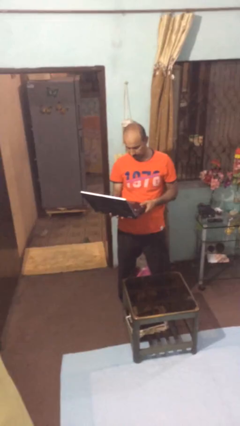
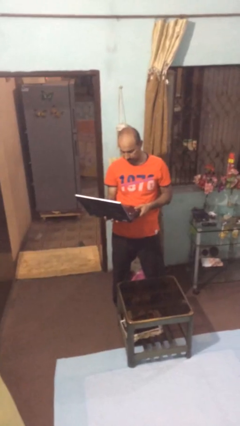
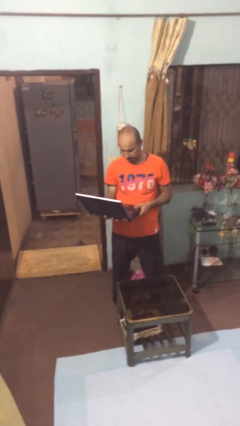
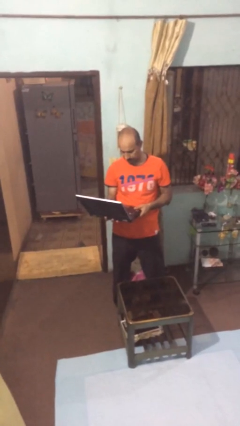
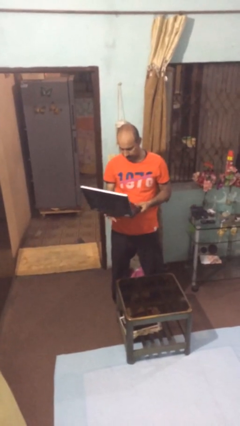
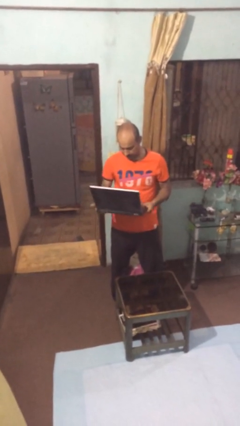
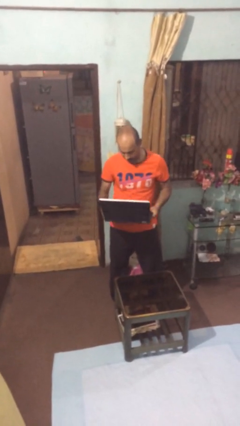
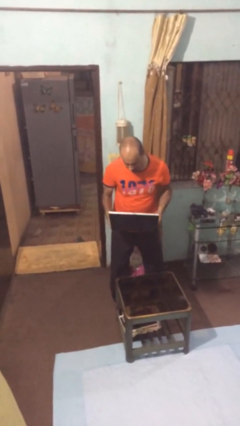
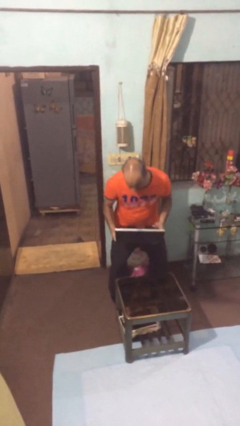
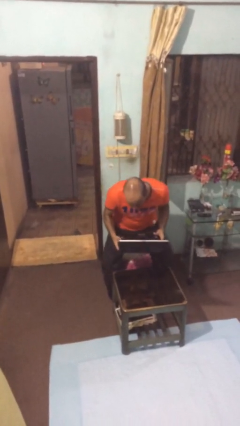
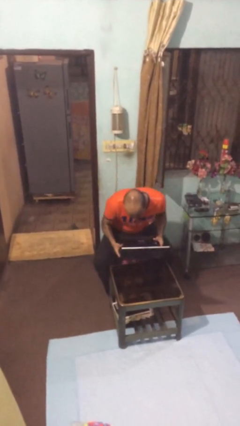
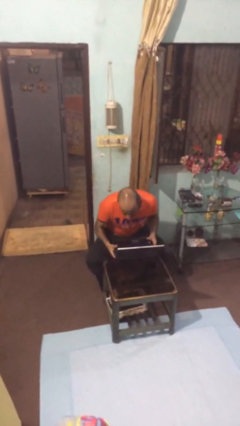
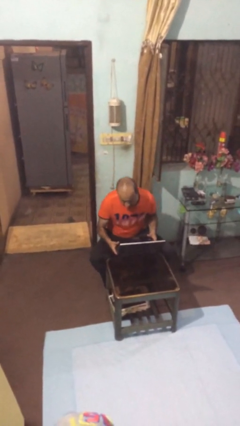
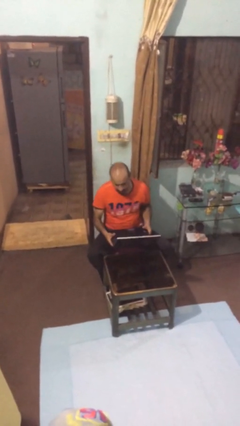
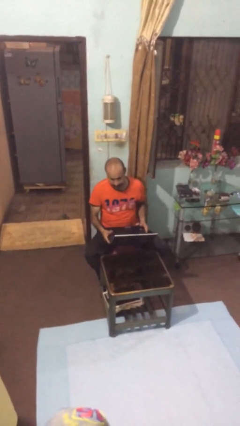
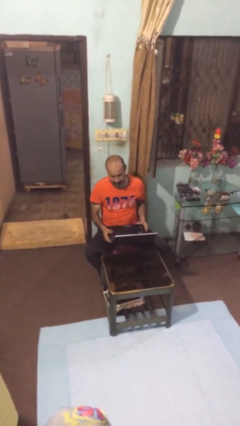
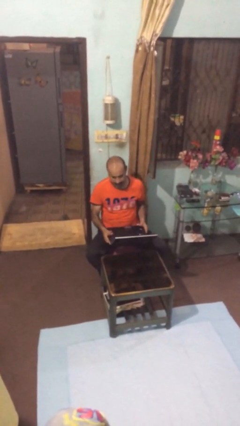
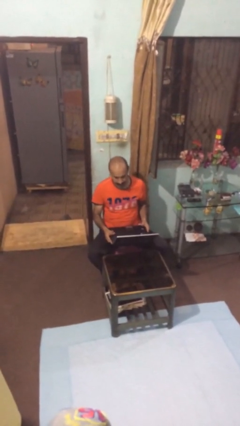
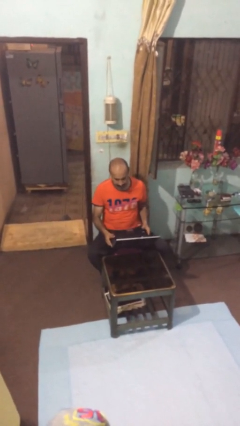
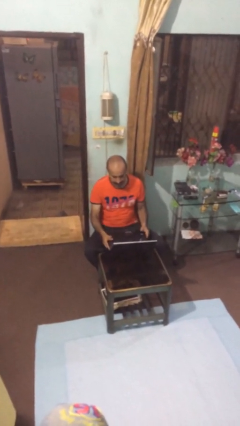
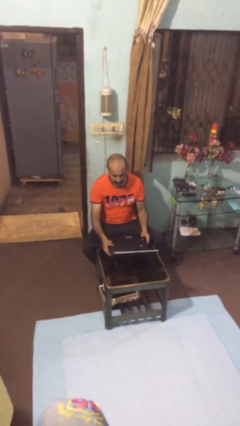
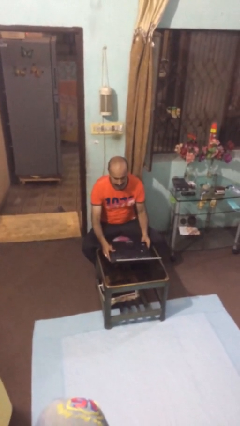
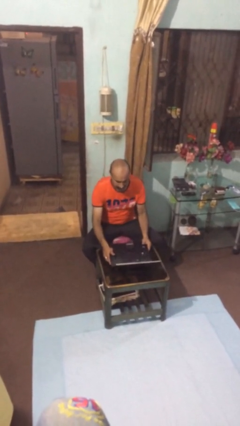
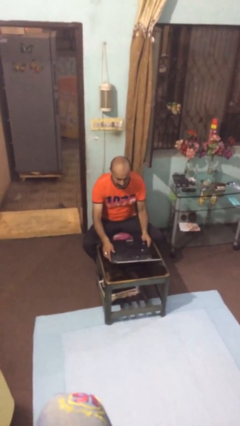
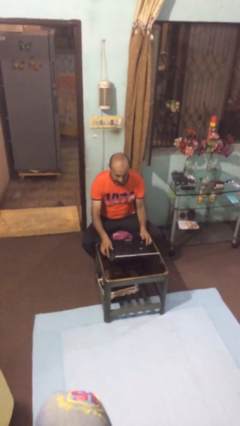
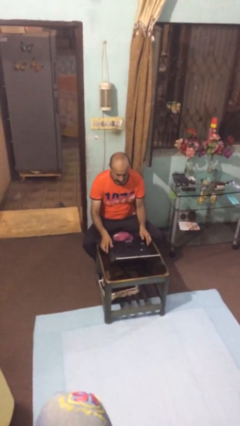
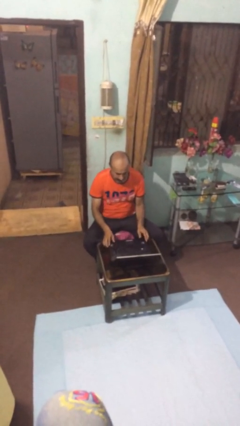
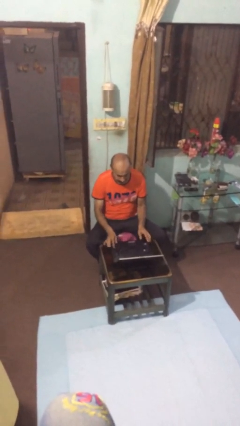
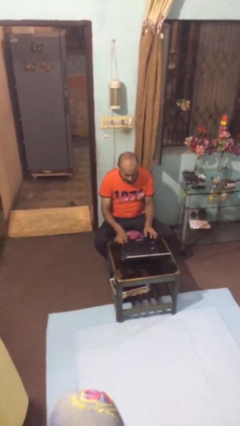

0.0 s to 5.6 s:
person sits down

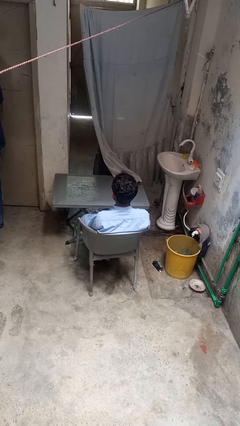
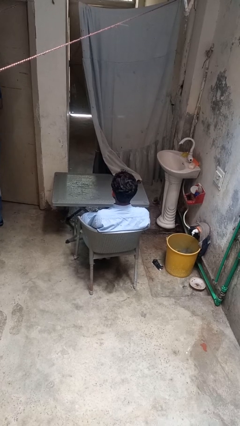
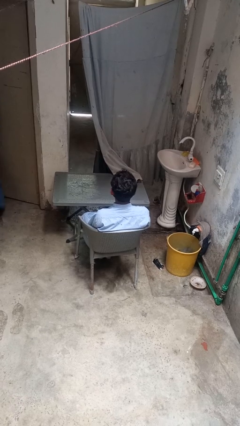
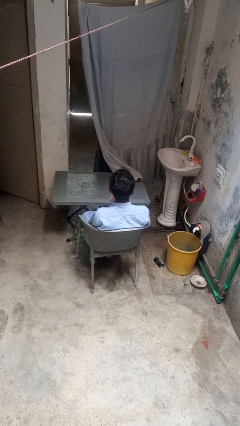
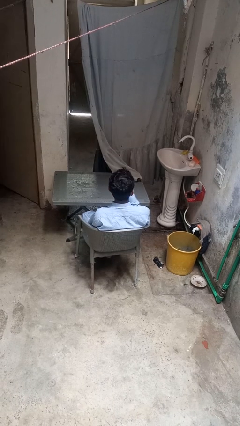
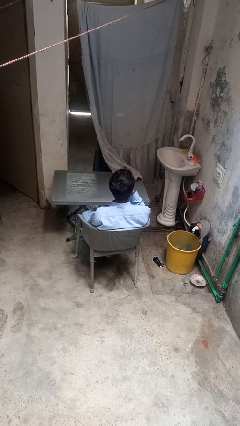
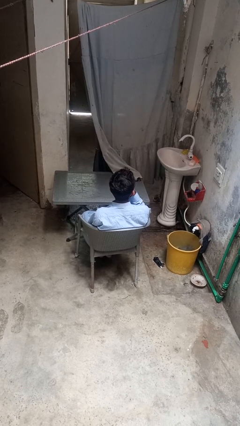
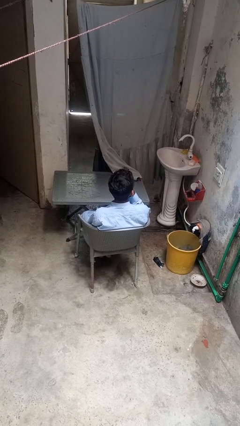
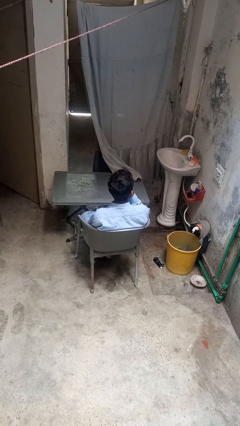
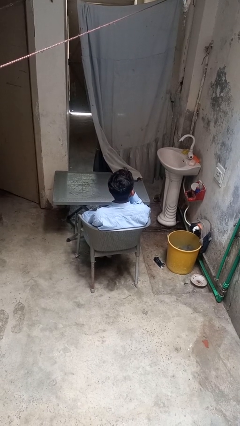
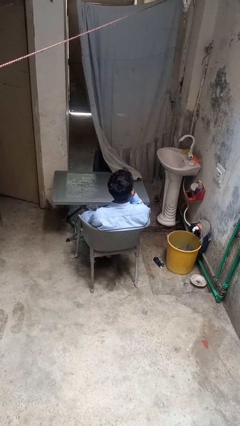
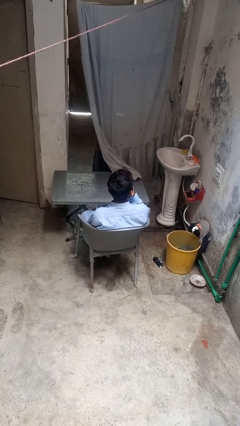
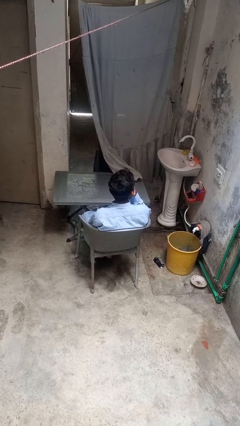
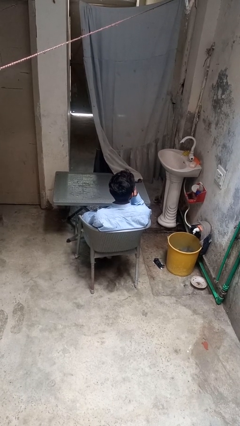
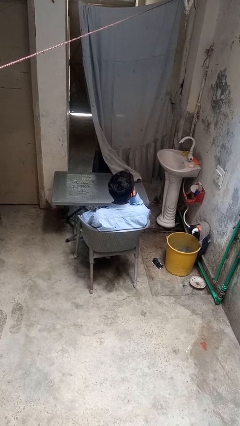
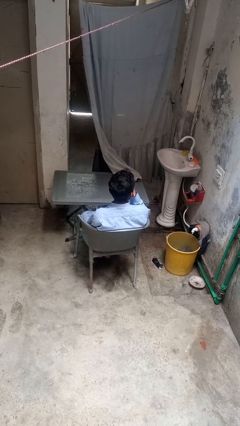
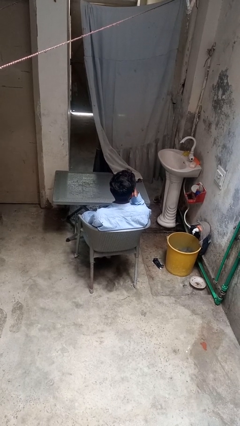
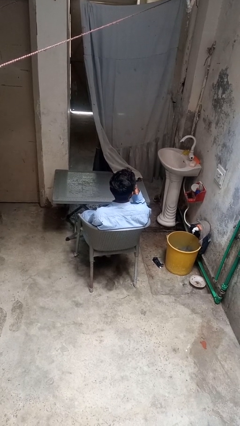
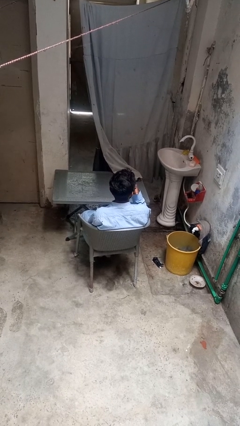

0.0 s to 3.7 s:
person licks fingers

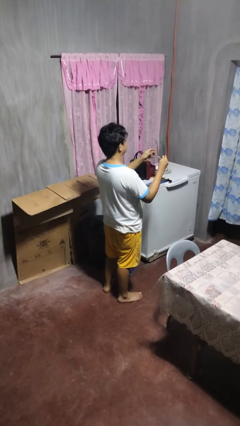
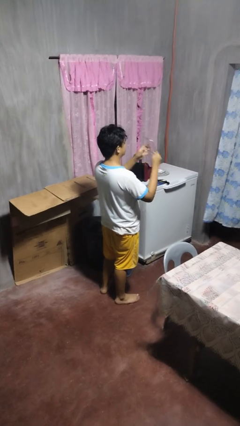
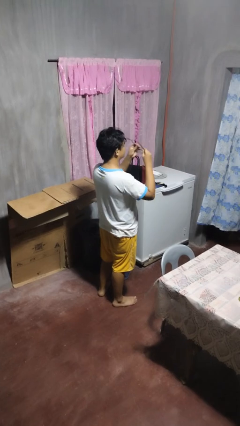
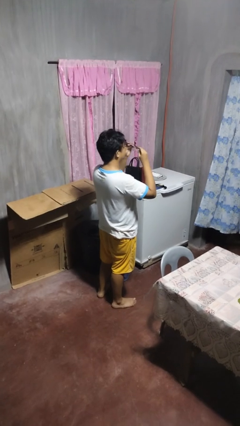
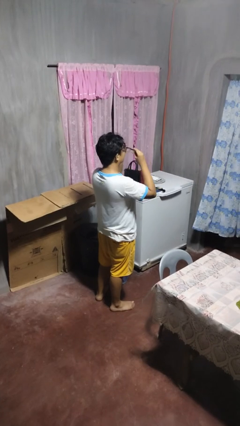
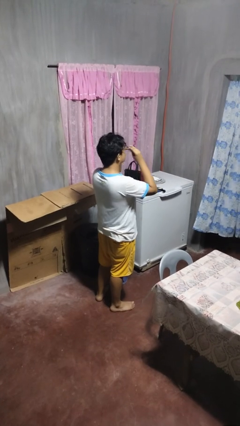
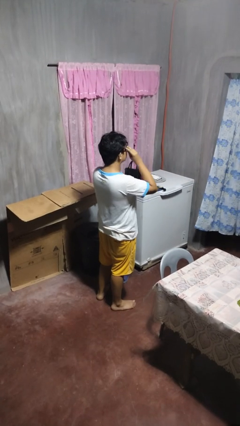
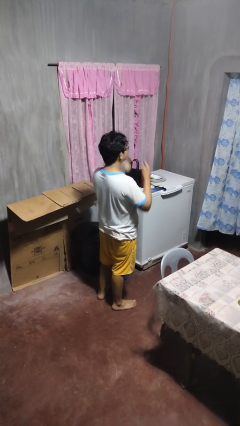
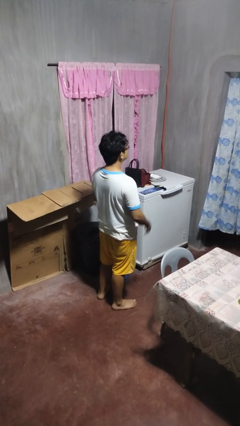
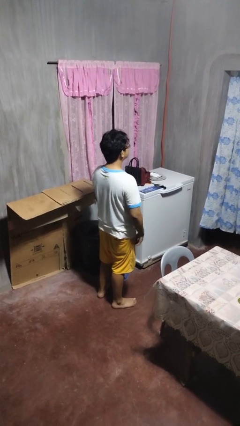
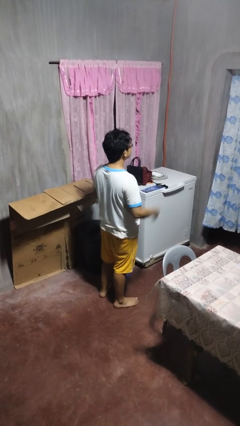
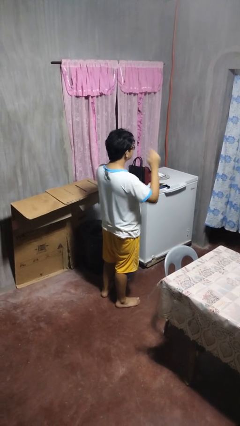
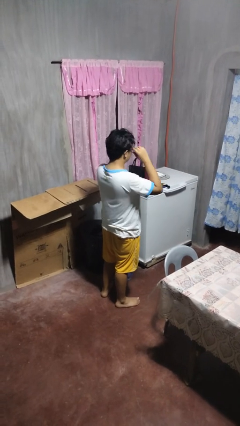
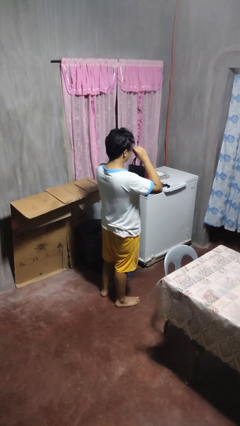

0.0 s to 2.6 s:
person puts on glasses

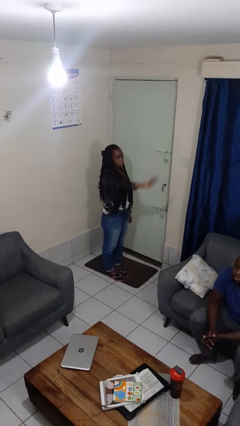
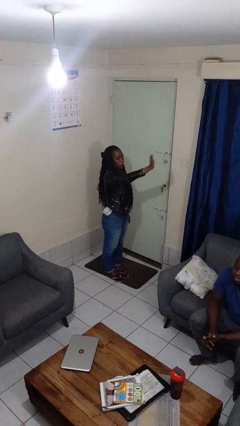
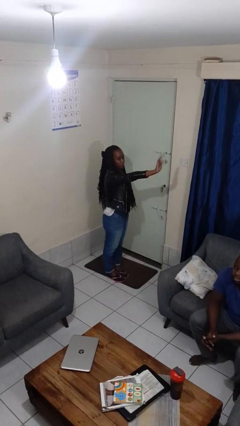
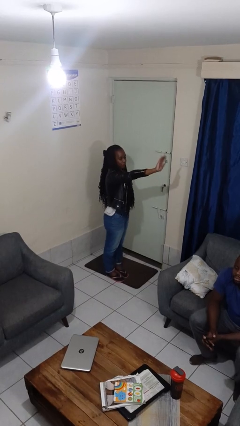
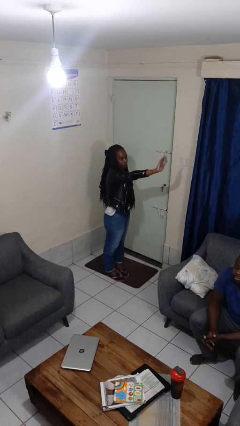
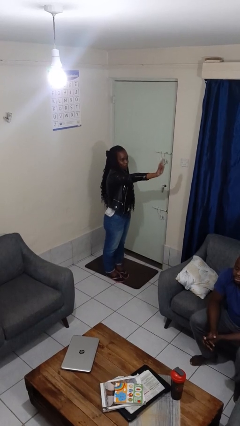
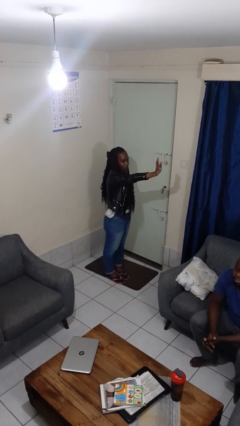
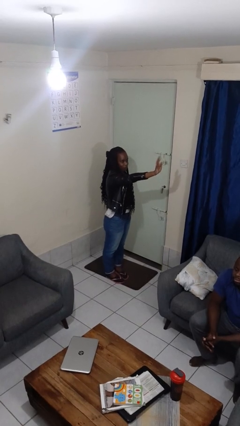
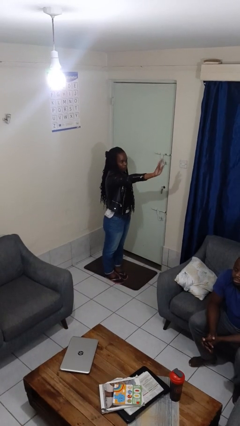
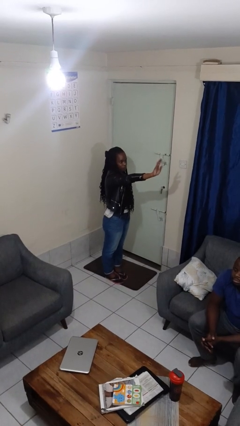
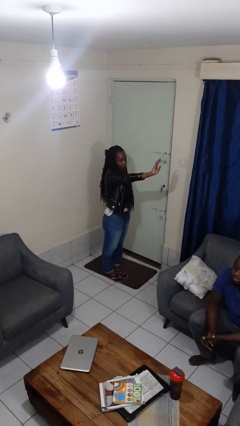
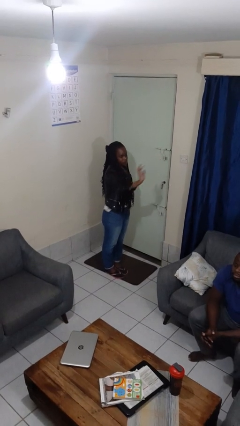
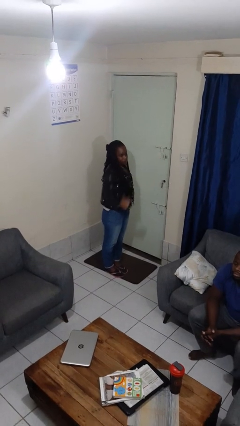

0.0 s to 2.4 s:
person waves at person

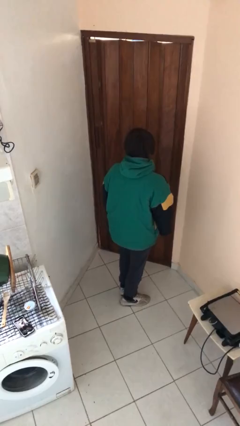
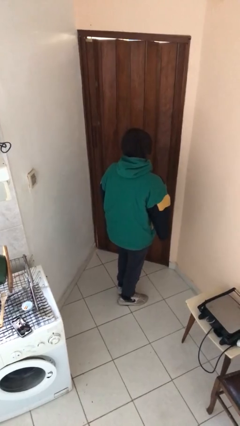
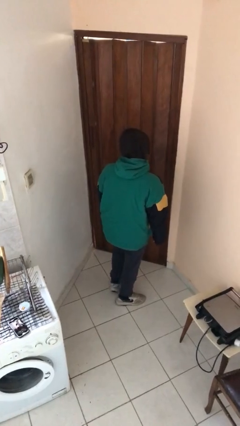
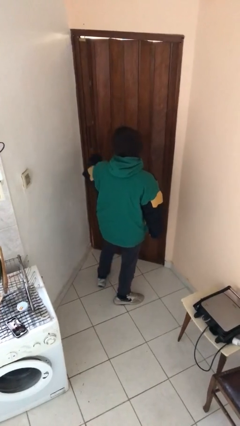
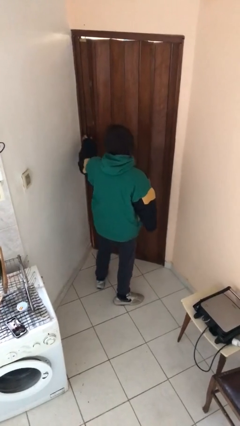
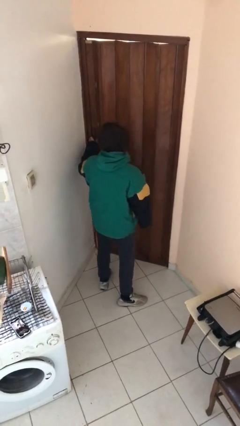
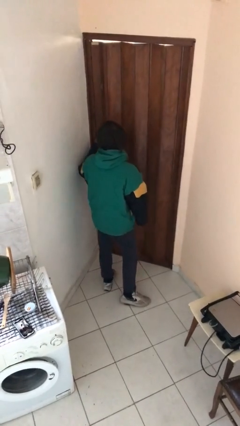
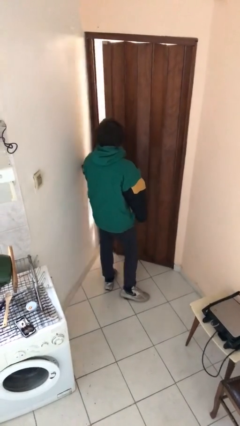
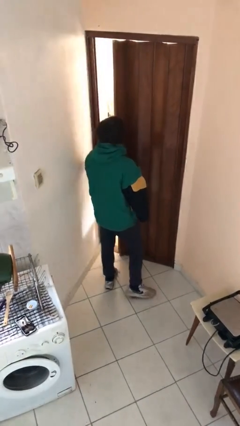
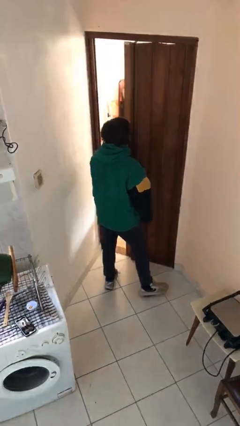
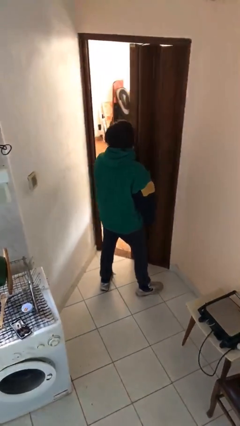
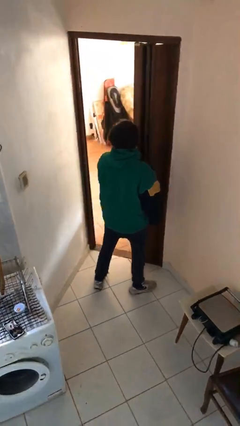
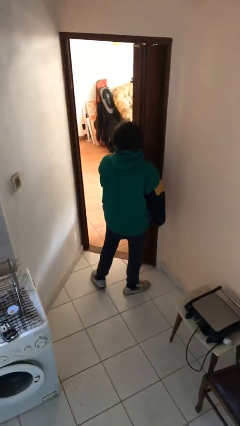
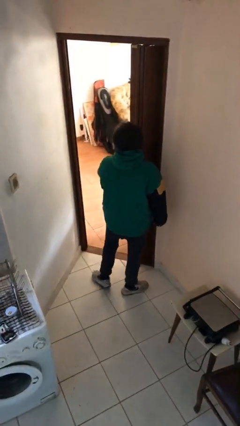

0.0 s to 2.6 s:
person opens sliding door

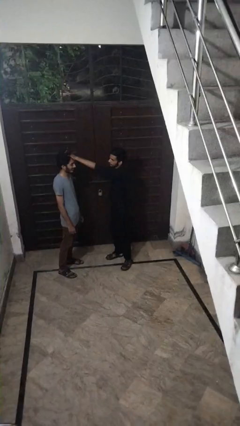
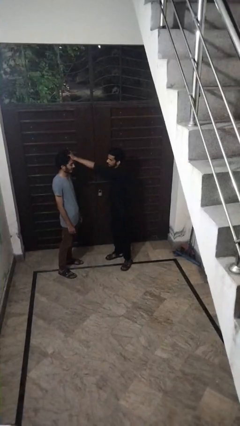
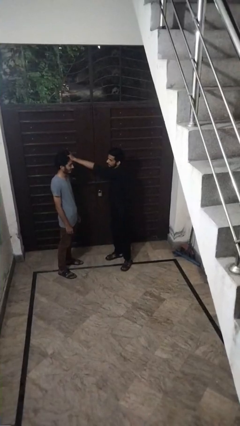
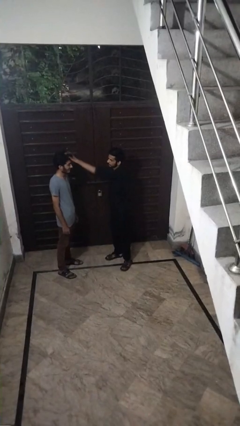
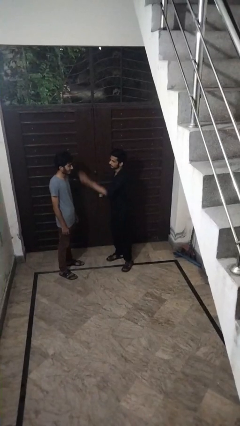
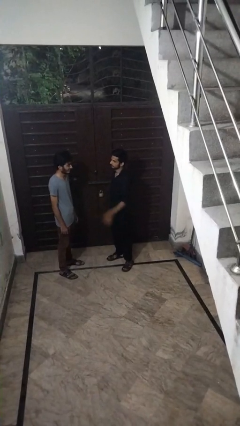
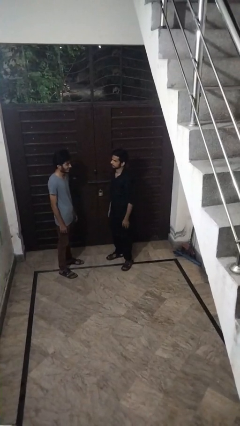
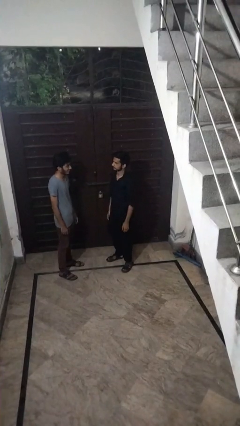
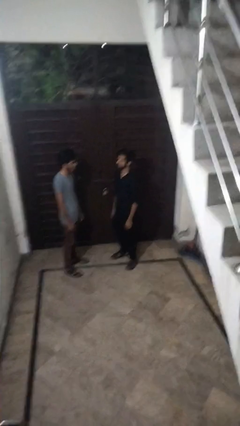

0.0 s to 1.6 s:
person grabs person by hair
